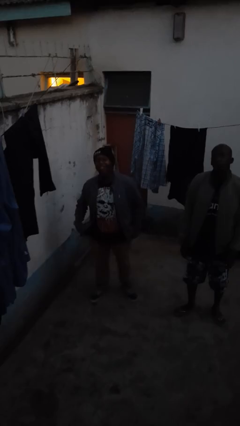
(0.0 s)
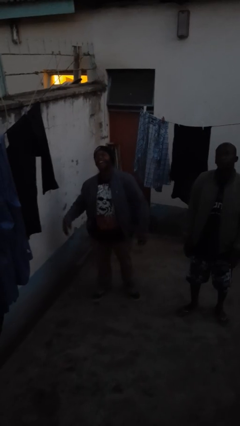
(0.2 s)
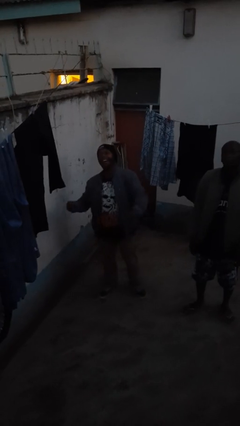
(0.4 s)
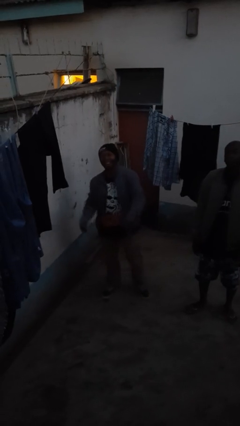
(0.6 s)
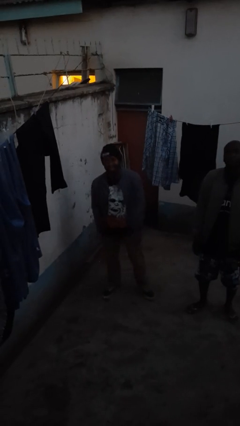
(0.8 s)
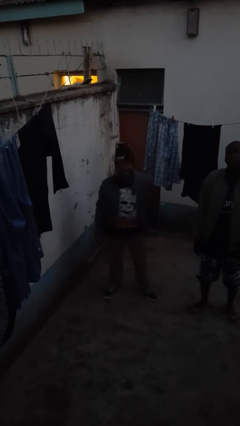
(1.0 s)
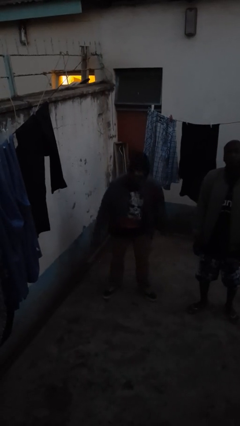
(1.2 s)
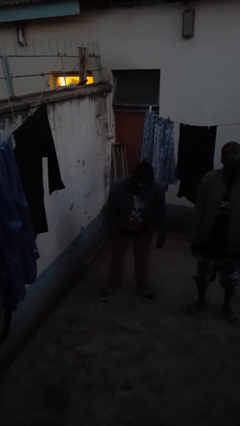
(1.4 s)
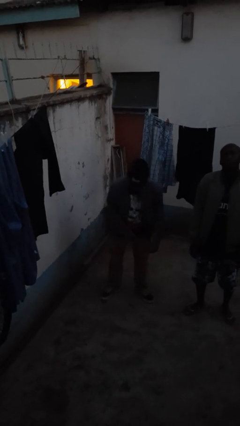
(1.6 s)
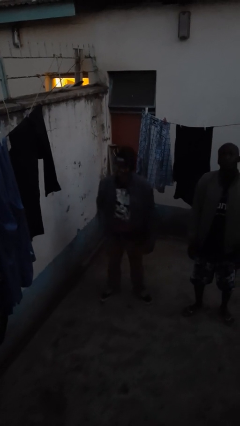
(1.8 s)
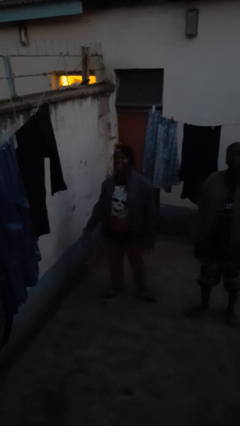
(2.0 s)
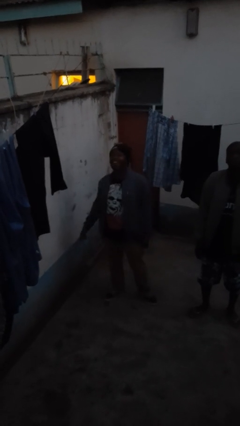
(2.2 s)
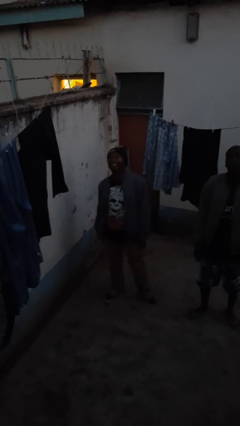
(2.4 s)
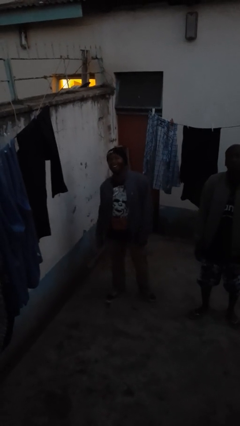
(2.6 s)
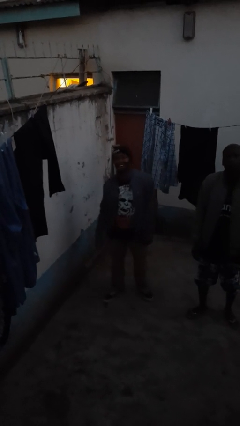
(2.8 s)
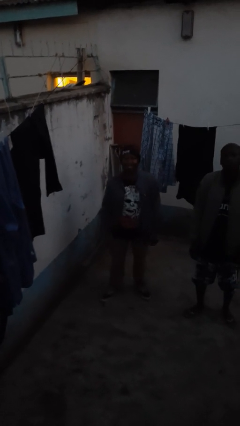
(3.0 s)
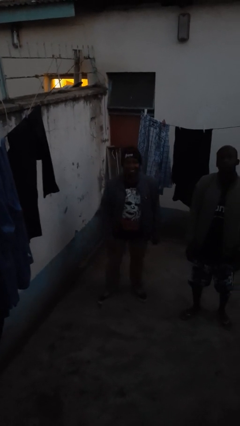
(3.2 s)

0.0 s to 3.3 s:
person laughs with person

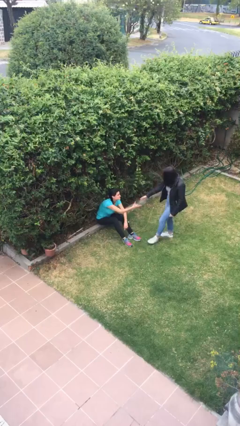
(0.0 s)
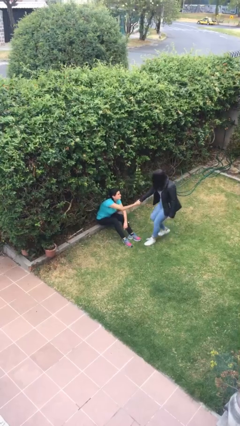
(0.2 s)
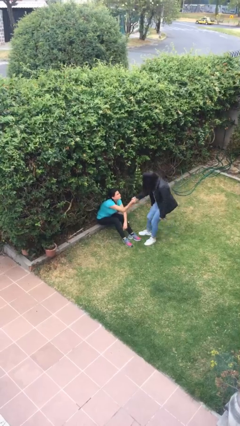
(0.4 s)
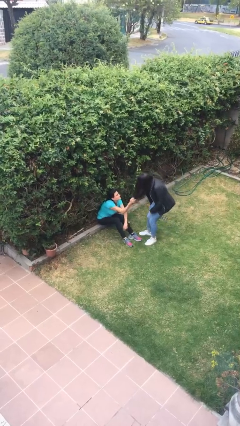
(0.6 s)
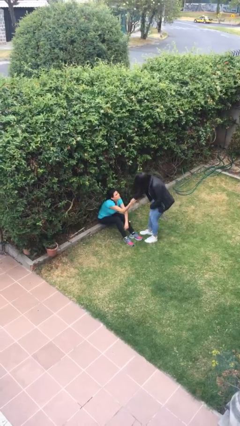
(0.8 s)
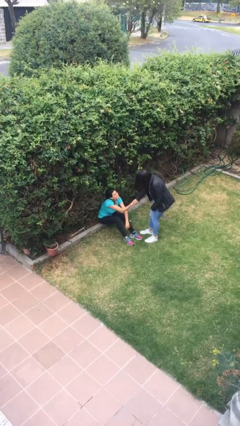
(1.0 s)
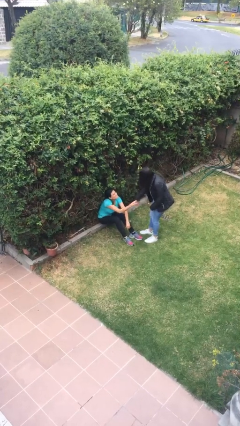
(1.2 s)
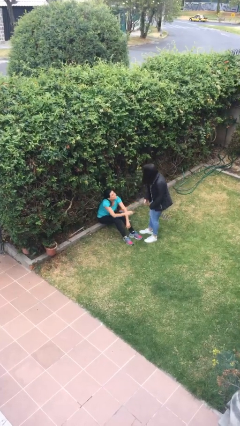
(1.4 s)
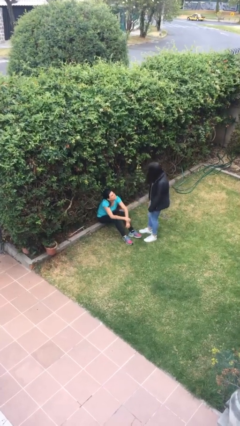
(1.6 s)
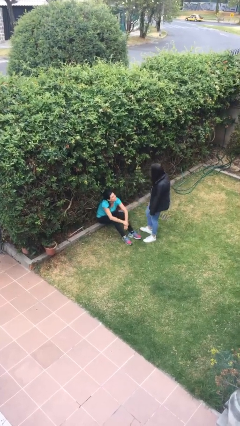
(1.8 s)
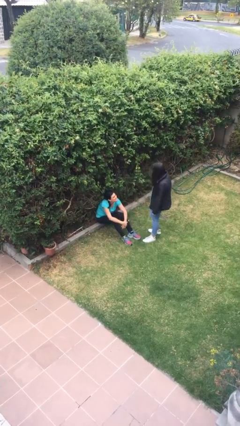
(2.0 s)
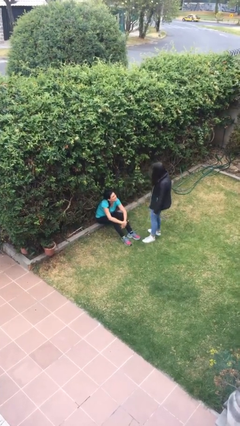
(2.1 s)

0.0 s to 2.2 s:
person shakes hand

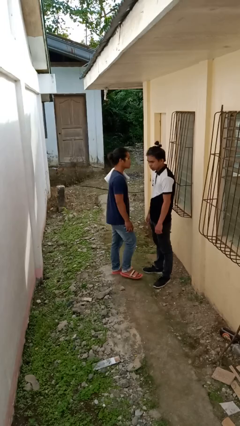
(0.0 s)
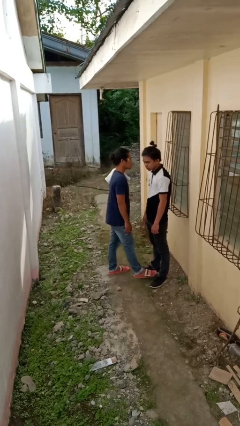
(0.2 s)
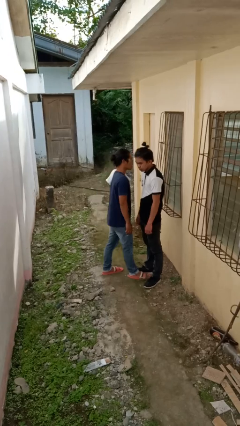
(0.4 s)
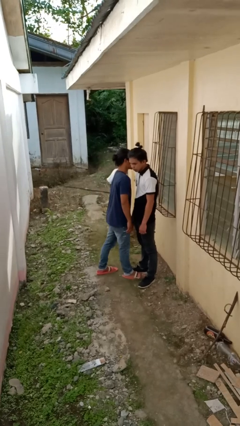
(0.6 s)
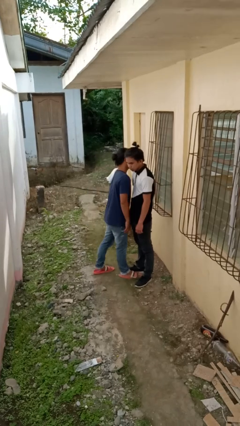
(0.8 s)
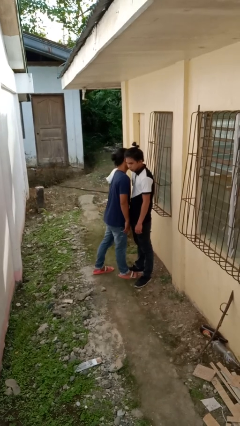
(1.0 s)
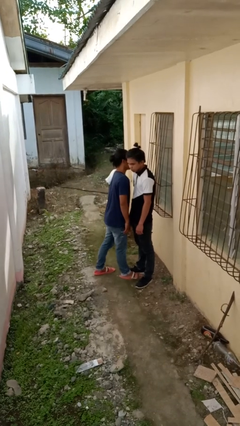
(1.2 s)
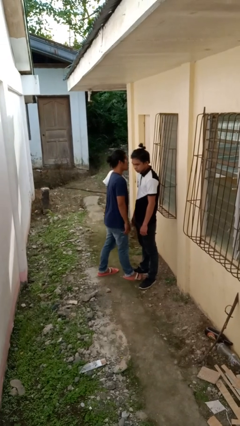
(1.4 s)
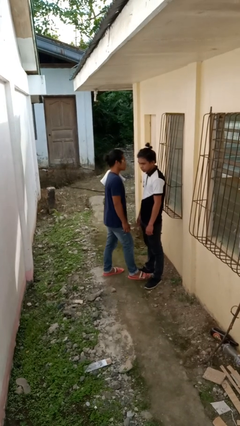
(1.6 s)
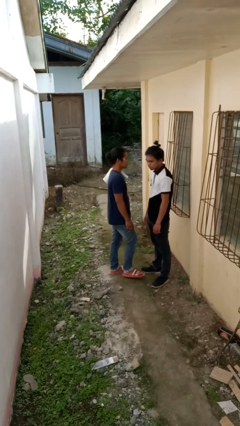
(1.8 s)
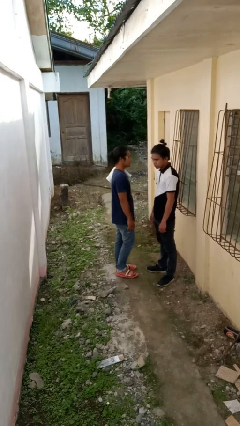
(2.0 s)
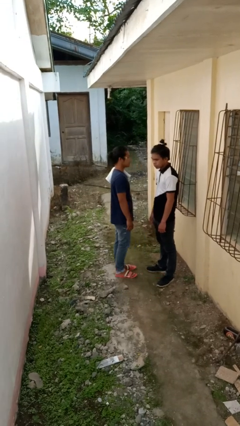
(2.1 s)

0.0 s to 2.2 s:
person kisses cheek of person

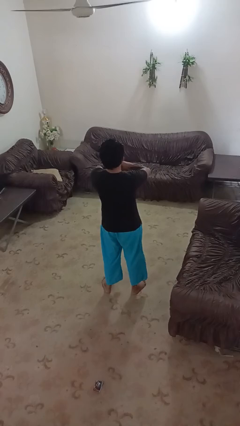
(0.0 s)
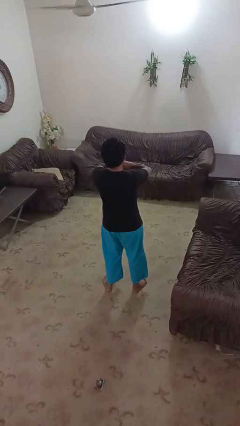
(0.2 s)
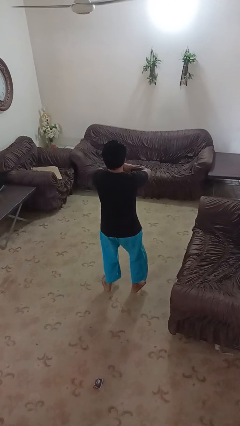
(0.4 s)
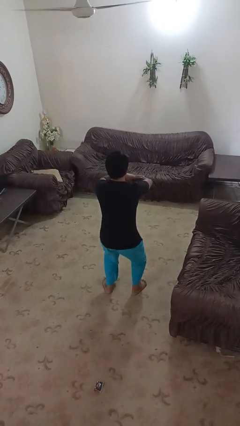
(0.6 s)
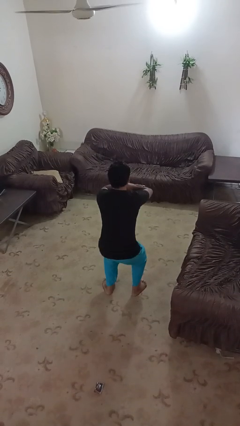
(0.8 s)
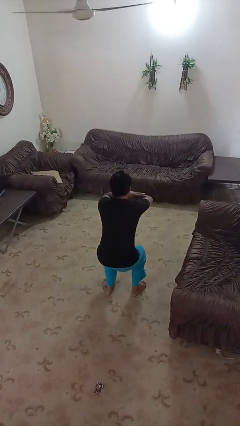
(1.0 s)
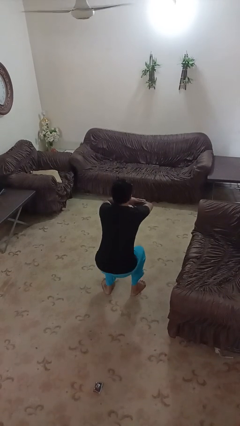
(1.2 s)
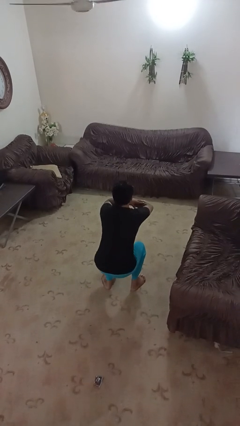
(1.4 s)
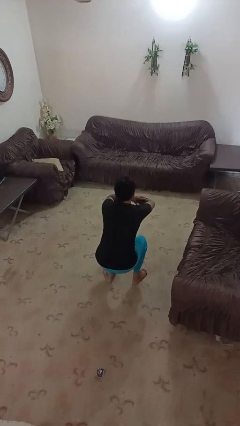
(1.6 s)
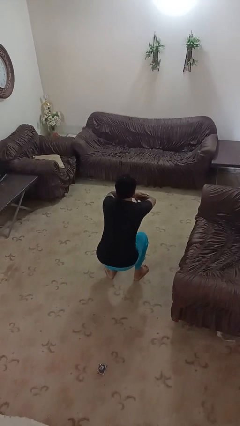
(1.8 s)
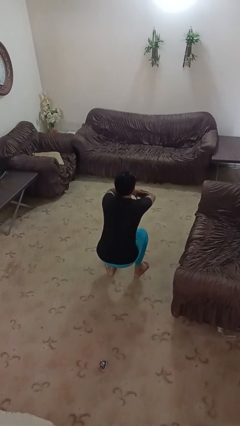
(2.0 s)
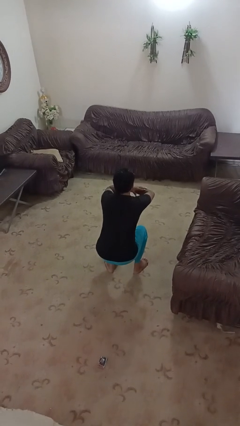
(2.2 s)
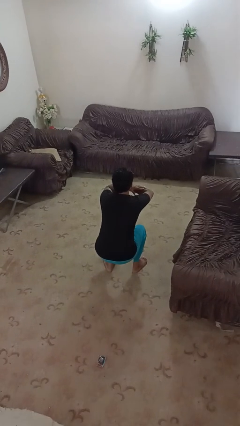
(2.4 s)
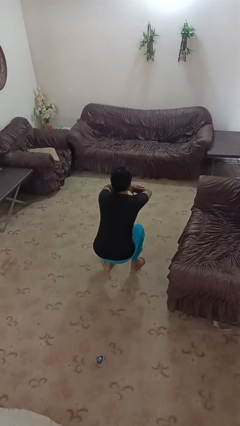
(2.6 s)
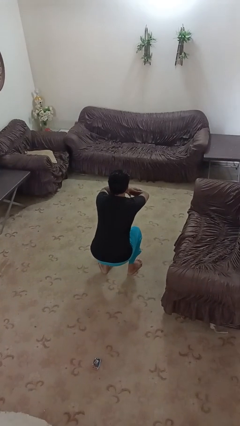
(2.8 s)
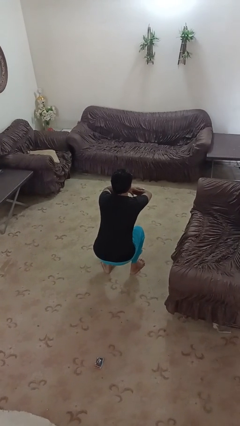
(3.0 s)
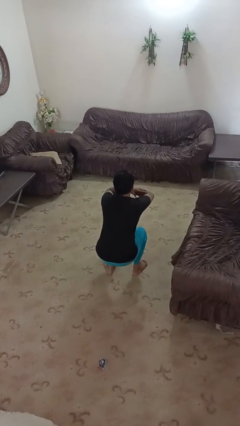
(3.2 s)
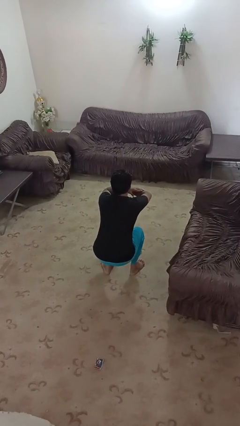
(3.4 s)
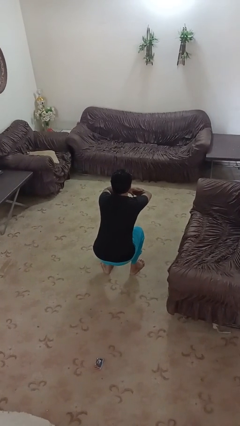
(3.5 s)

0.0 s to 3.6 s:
person squats

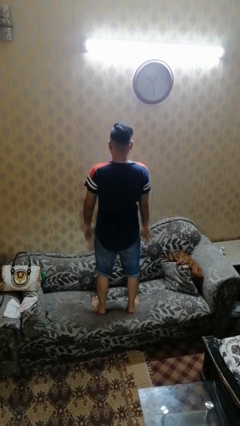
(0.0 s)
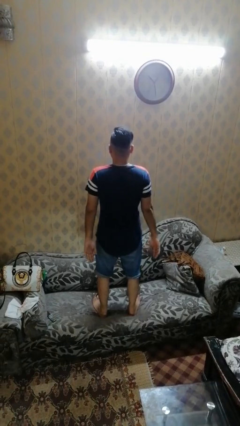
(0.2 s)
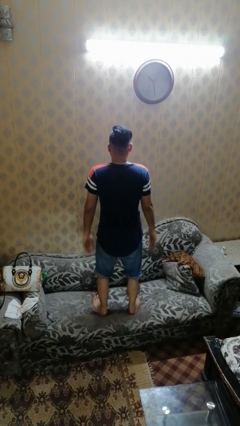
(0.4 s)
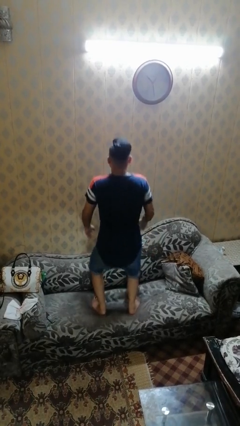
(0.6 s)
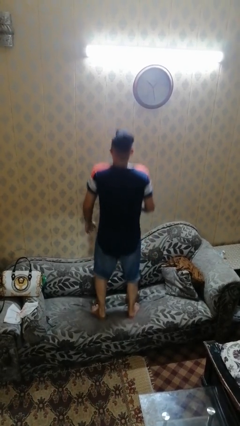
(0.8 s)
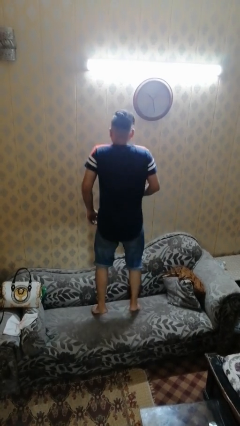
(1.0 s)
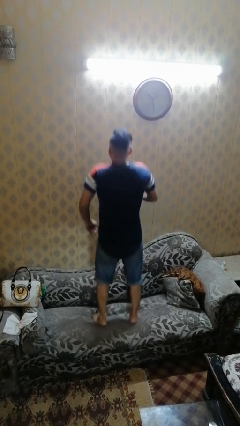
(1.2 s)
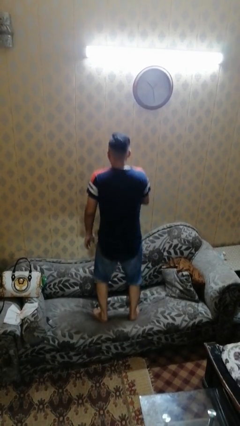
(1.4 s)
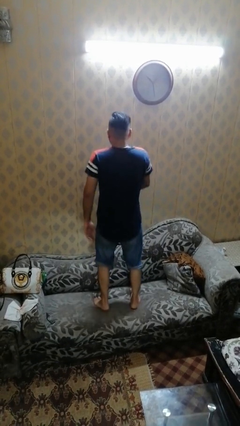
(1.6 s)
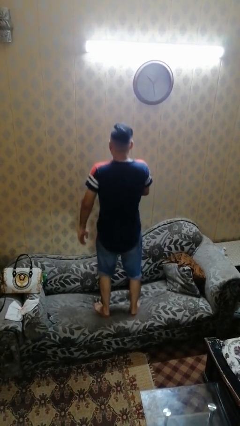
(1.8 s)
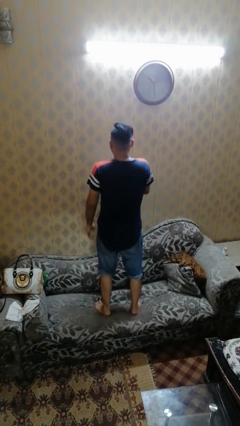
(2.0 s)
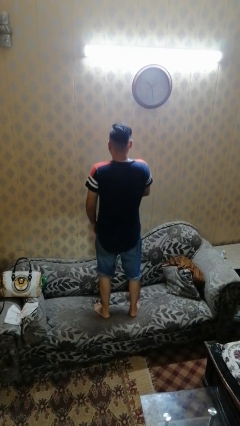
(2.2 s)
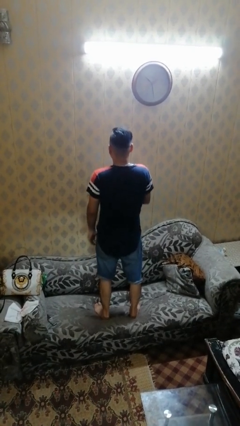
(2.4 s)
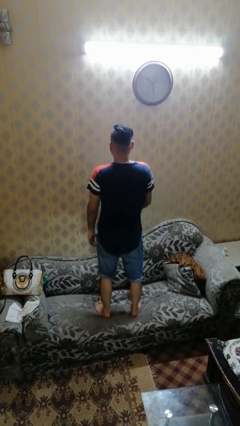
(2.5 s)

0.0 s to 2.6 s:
person jumps on couch

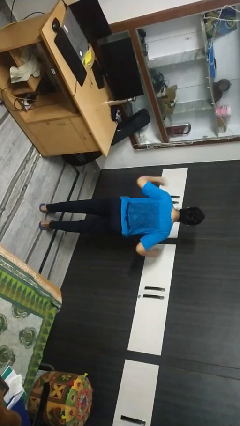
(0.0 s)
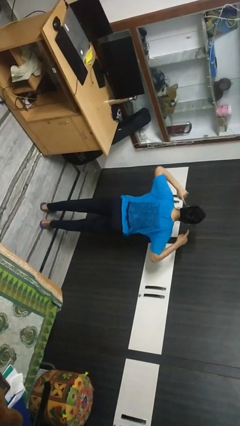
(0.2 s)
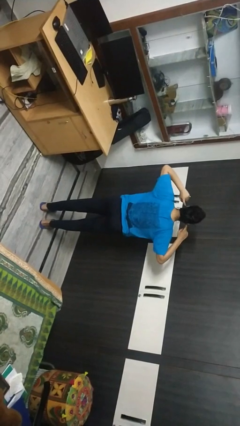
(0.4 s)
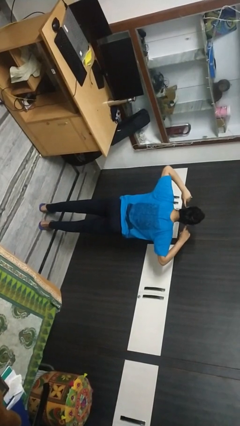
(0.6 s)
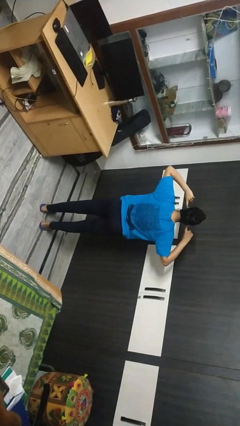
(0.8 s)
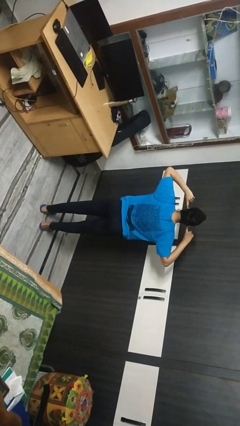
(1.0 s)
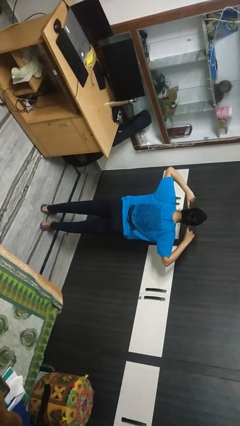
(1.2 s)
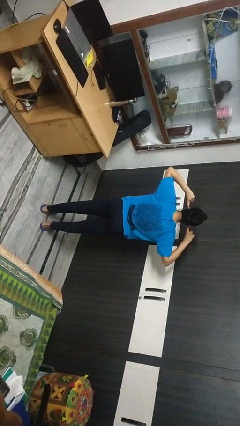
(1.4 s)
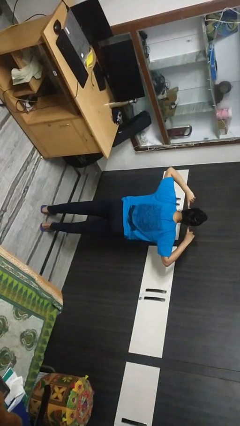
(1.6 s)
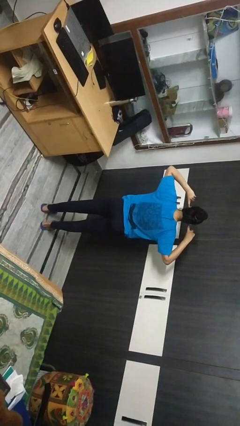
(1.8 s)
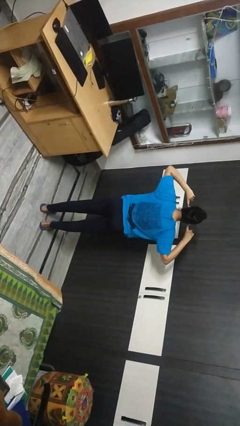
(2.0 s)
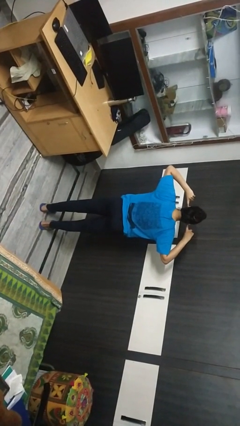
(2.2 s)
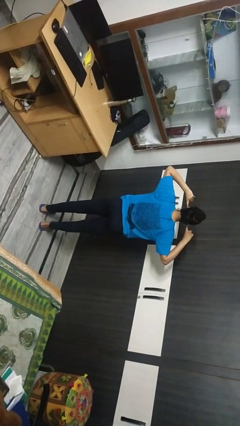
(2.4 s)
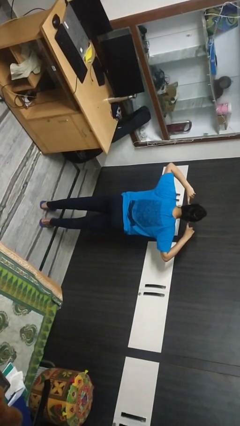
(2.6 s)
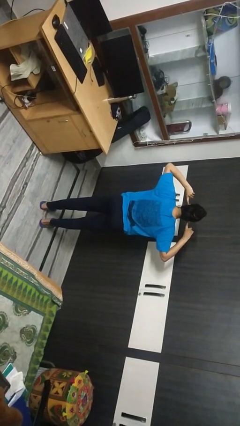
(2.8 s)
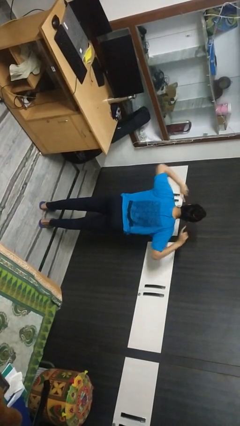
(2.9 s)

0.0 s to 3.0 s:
person puts fingers in ear

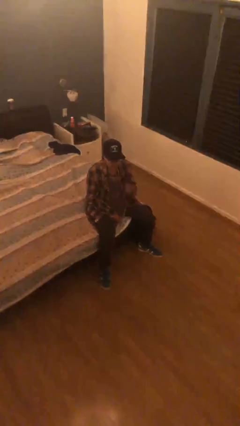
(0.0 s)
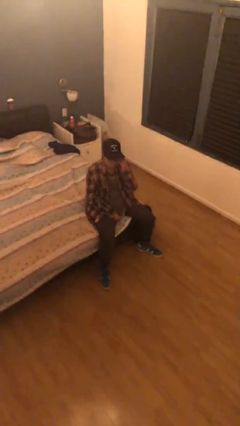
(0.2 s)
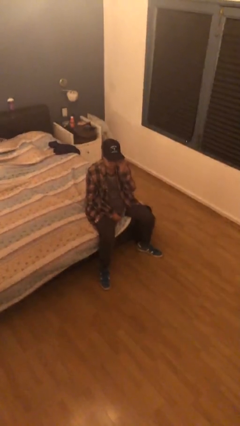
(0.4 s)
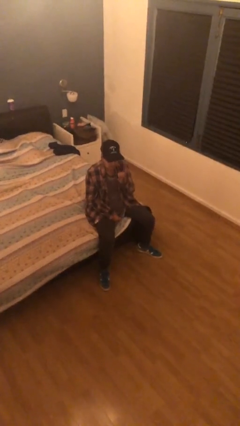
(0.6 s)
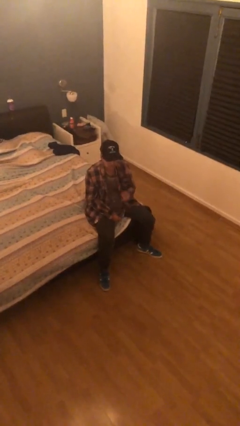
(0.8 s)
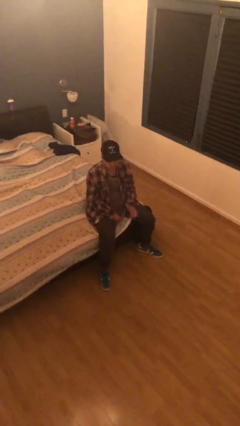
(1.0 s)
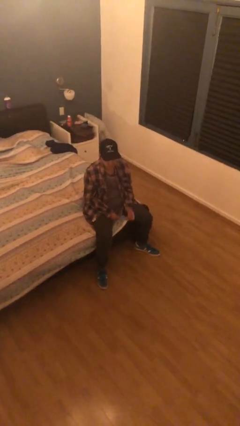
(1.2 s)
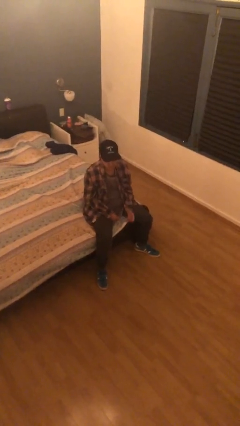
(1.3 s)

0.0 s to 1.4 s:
person takes off glasses
